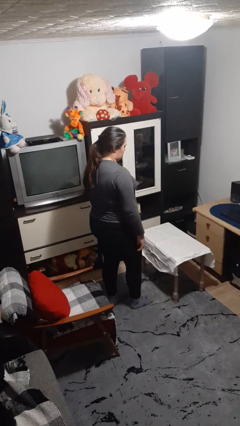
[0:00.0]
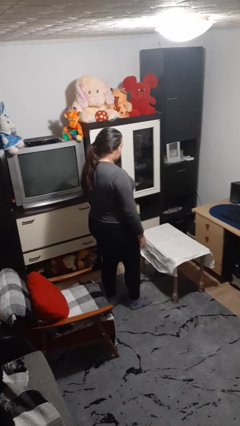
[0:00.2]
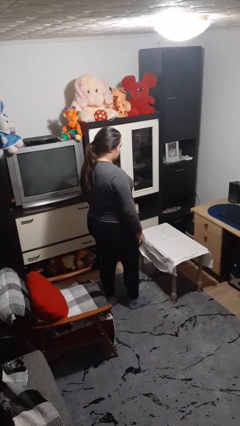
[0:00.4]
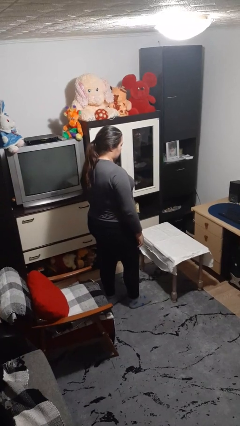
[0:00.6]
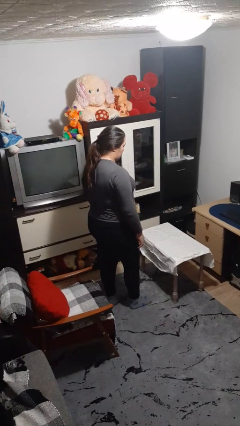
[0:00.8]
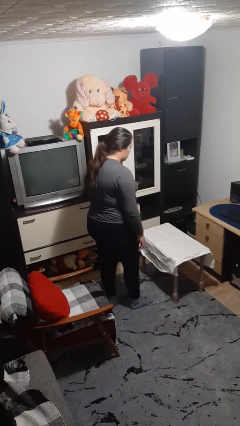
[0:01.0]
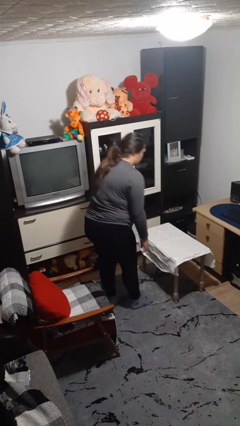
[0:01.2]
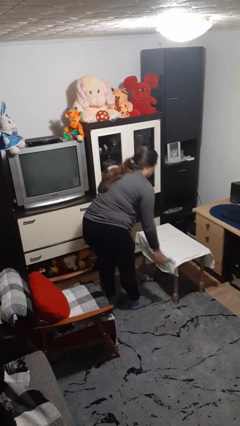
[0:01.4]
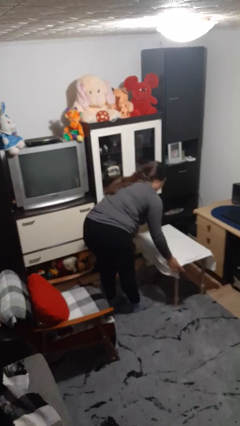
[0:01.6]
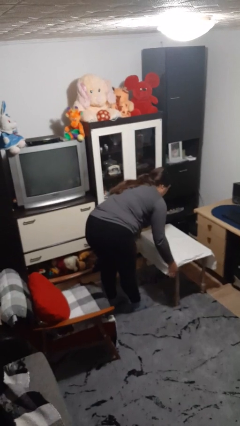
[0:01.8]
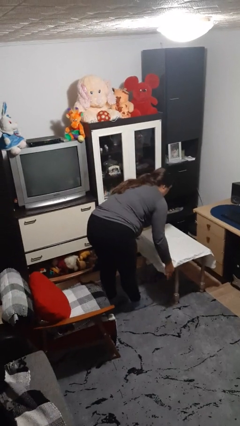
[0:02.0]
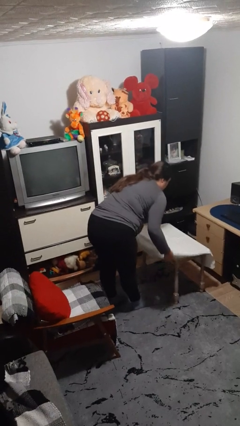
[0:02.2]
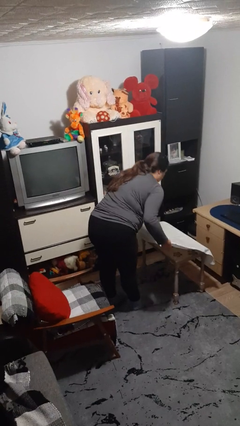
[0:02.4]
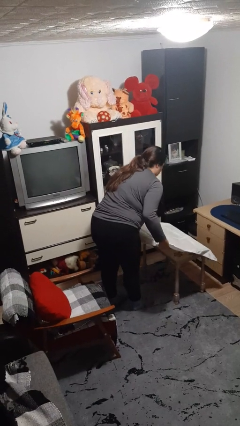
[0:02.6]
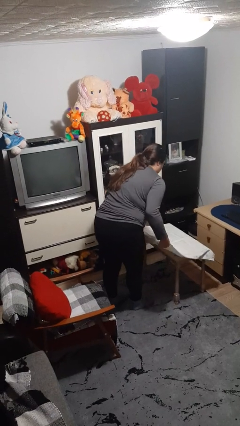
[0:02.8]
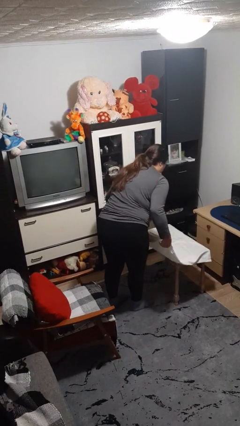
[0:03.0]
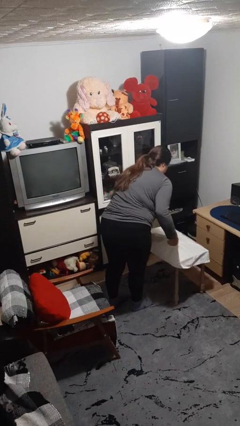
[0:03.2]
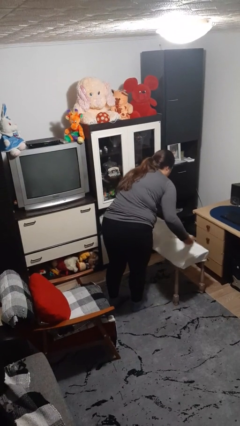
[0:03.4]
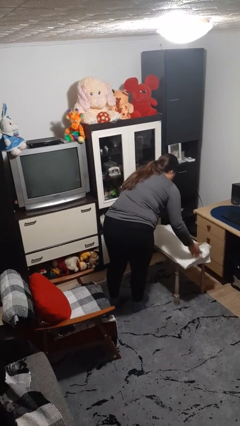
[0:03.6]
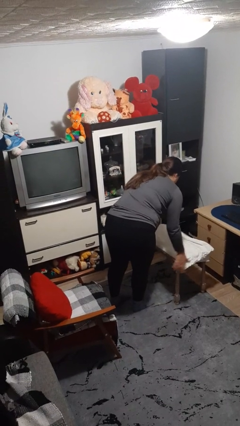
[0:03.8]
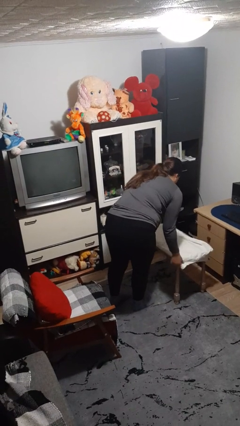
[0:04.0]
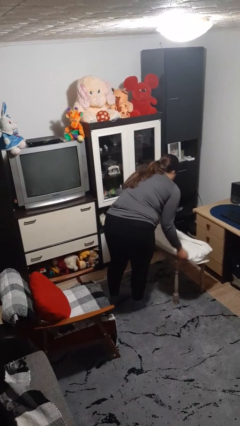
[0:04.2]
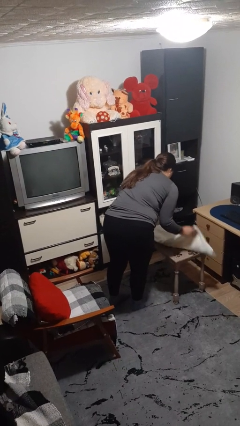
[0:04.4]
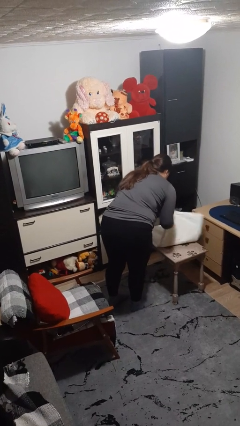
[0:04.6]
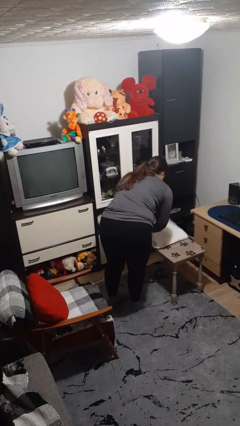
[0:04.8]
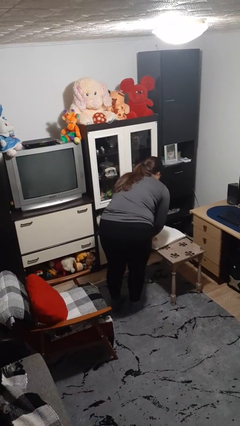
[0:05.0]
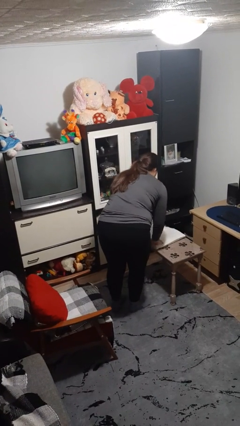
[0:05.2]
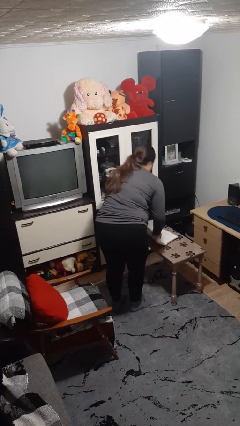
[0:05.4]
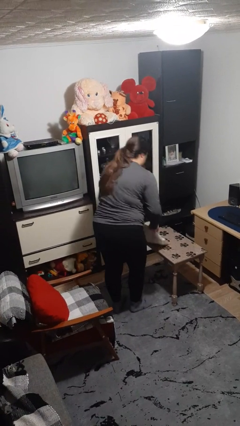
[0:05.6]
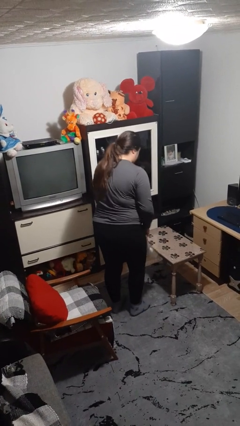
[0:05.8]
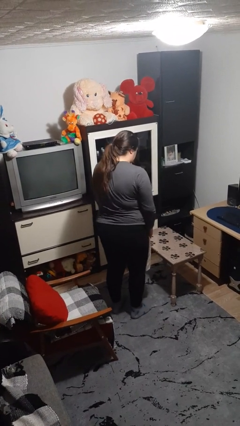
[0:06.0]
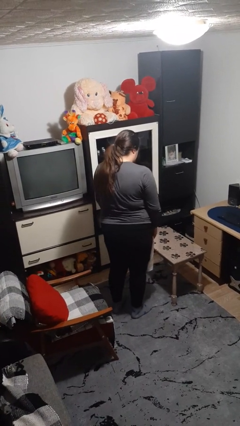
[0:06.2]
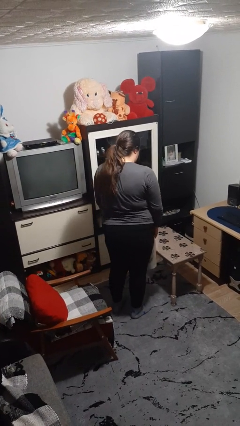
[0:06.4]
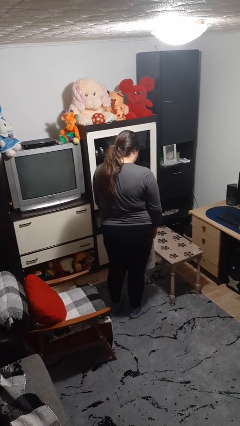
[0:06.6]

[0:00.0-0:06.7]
person folds tablecloth

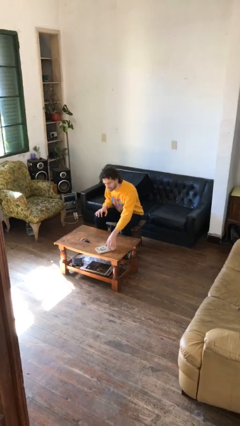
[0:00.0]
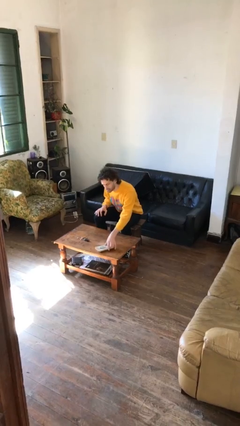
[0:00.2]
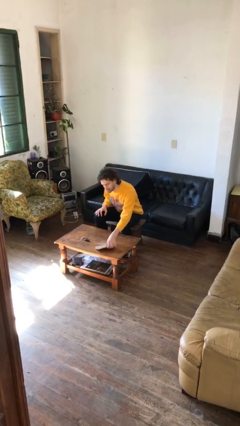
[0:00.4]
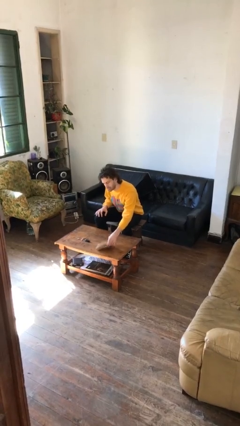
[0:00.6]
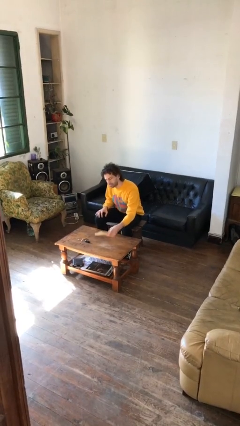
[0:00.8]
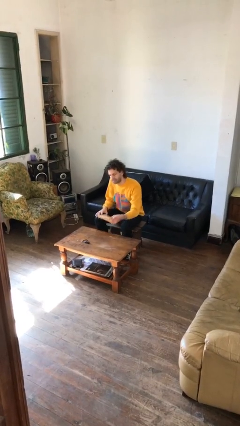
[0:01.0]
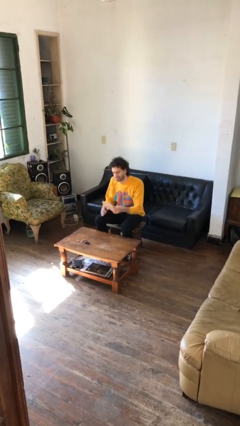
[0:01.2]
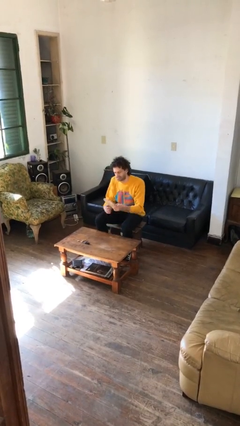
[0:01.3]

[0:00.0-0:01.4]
person picks up object from table

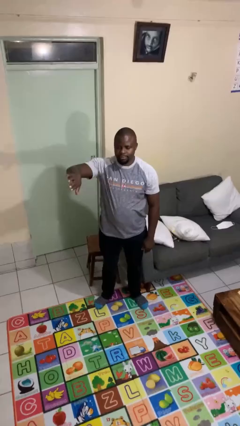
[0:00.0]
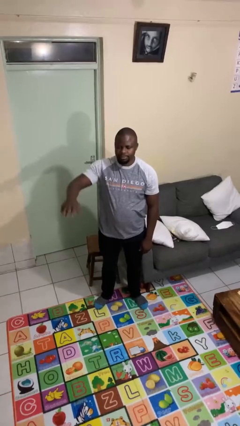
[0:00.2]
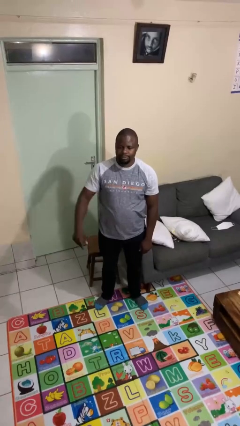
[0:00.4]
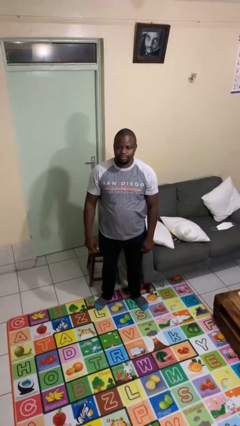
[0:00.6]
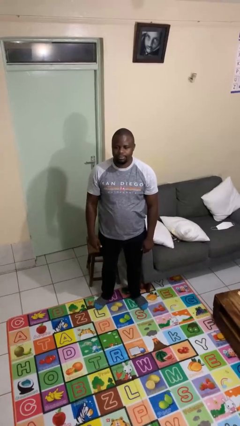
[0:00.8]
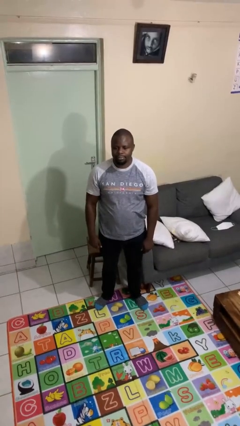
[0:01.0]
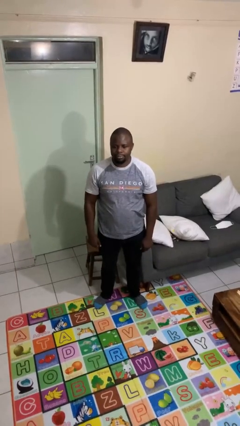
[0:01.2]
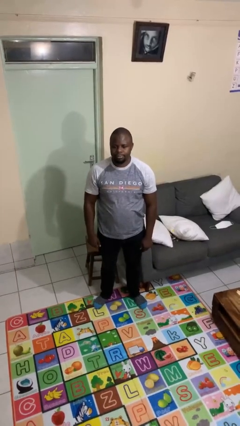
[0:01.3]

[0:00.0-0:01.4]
person gestures swipe right

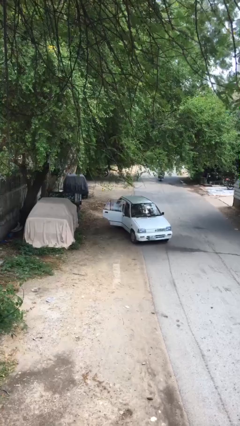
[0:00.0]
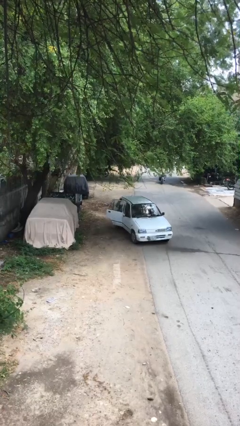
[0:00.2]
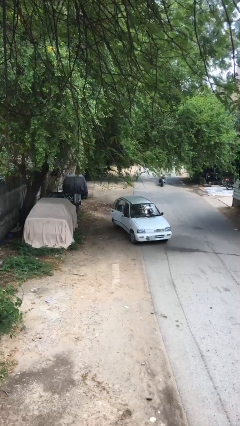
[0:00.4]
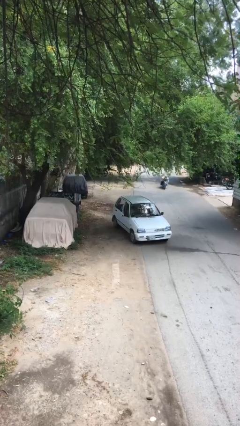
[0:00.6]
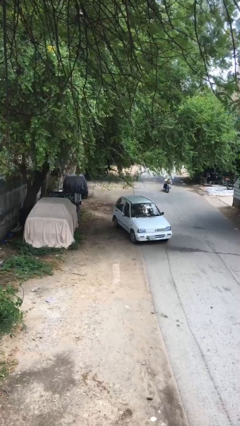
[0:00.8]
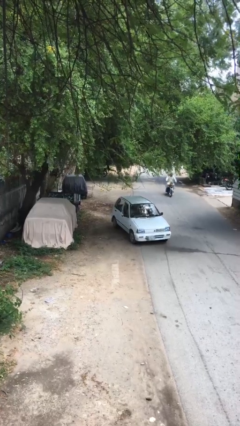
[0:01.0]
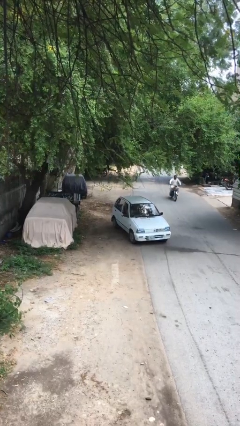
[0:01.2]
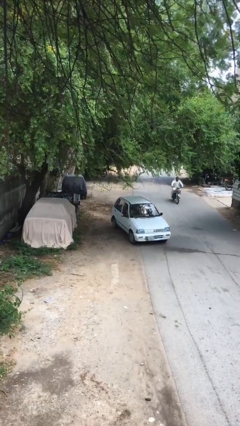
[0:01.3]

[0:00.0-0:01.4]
person closes car door

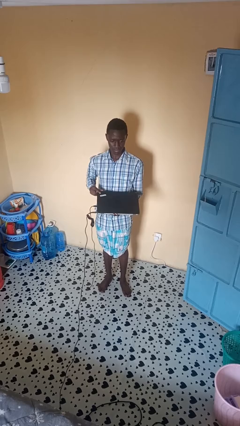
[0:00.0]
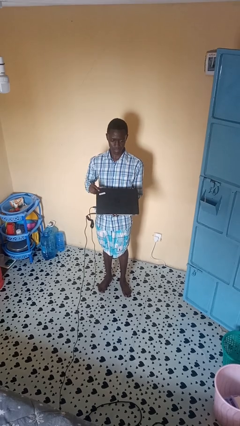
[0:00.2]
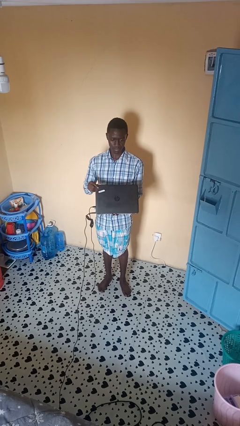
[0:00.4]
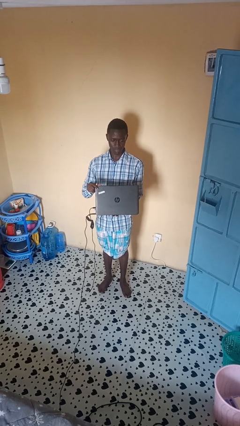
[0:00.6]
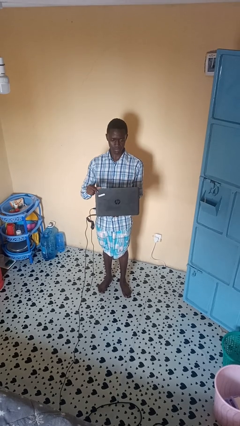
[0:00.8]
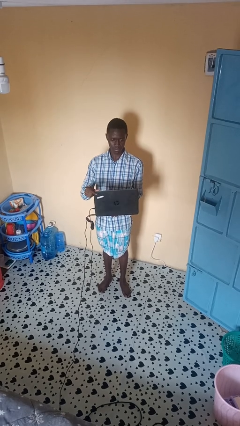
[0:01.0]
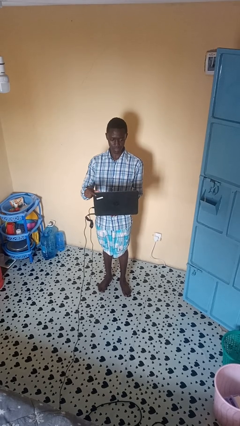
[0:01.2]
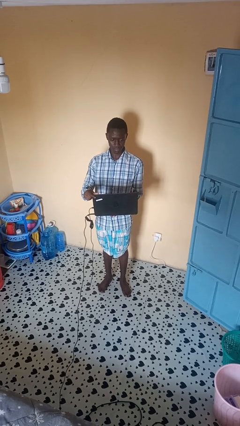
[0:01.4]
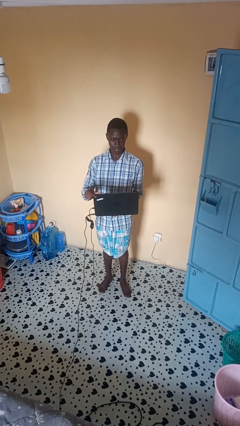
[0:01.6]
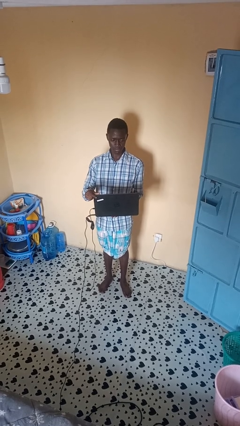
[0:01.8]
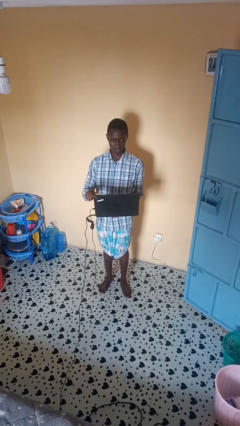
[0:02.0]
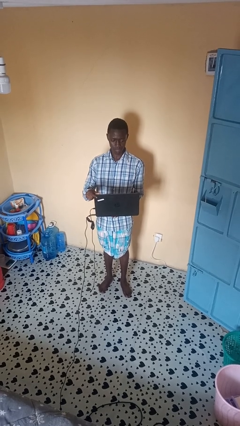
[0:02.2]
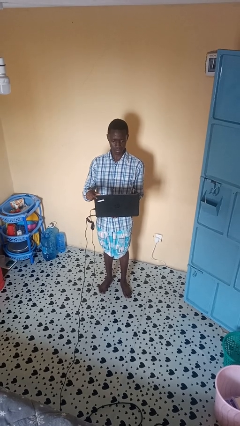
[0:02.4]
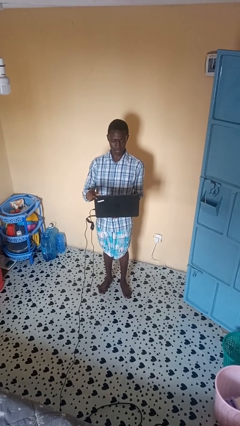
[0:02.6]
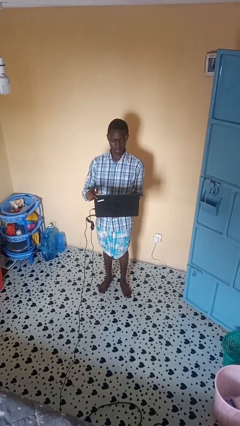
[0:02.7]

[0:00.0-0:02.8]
person opens laptop

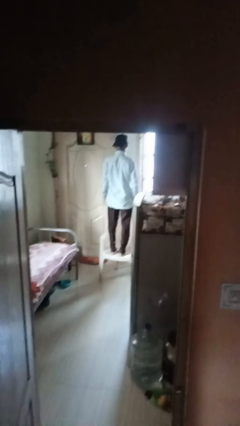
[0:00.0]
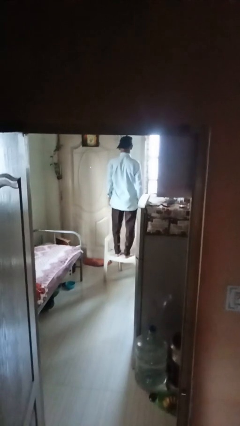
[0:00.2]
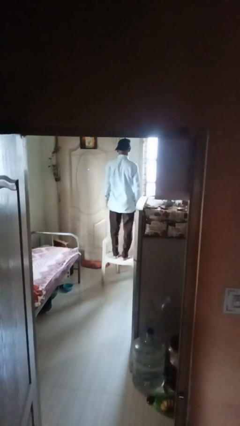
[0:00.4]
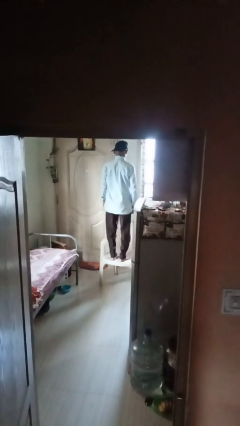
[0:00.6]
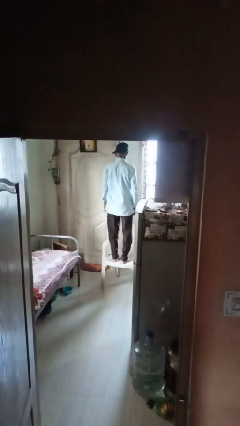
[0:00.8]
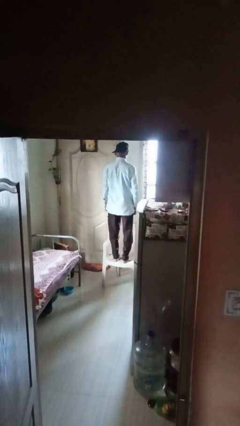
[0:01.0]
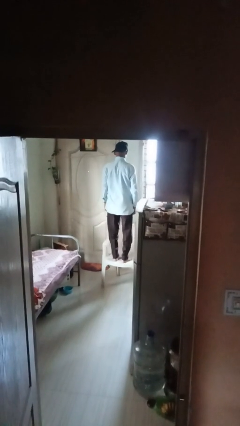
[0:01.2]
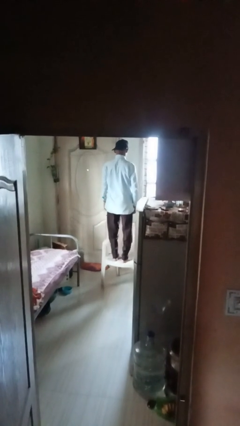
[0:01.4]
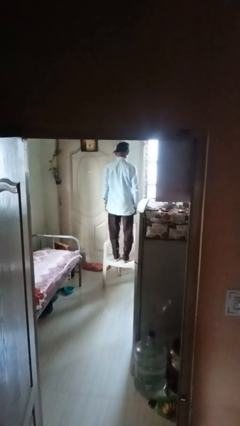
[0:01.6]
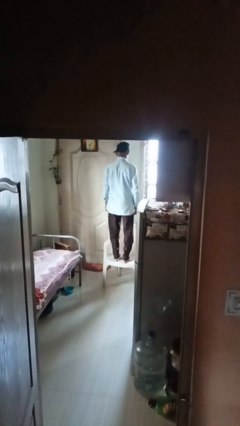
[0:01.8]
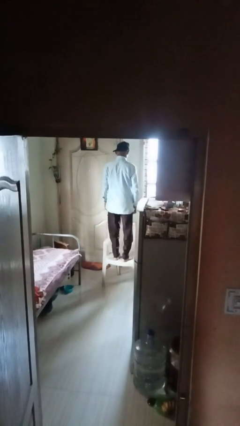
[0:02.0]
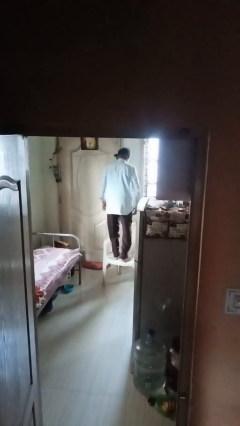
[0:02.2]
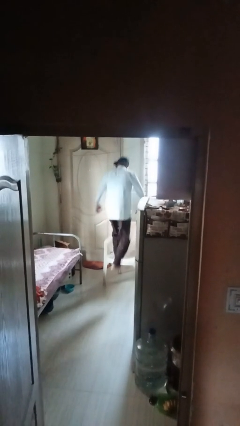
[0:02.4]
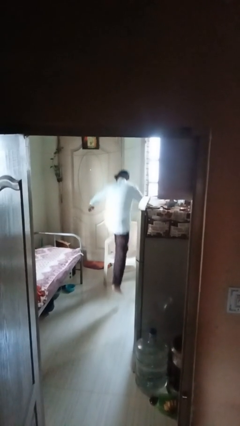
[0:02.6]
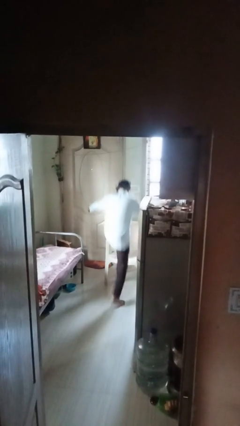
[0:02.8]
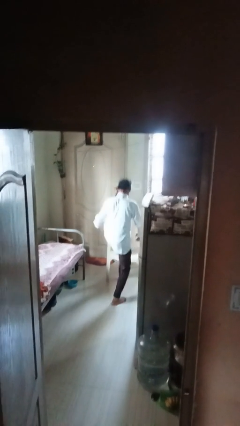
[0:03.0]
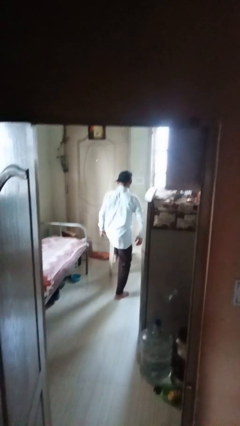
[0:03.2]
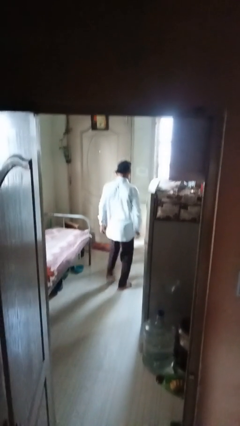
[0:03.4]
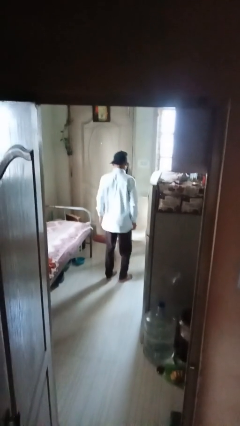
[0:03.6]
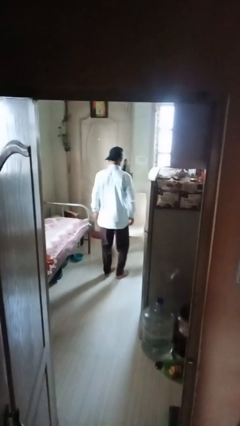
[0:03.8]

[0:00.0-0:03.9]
person climbs off chair

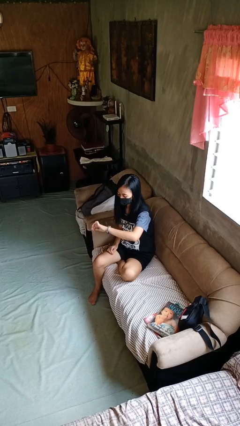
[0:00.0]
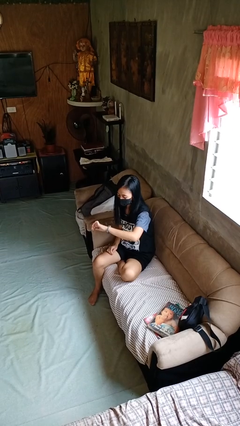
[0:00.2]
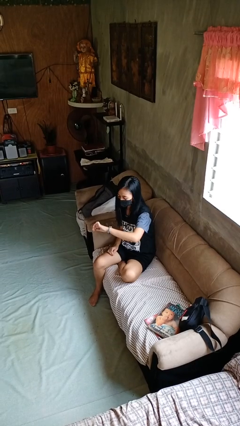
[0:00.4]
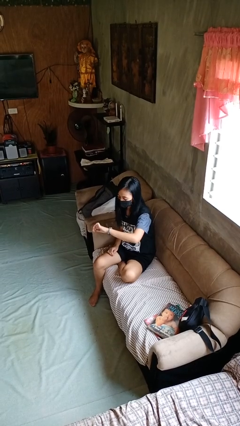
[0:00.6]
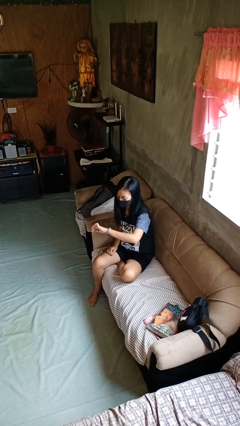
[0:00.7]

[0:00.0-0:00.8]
person looks at wristwatch
